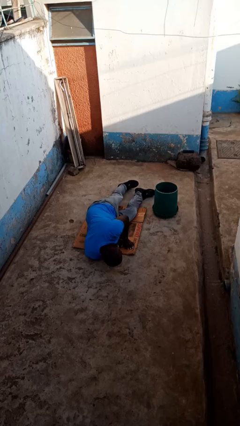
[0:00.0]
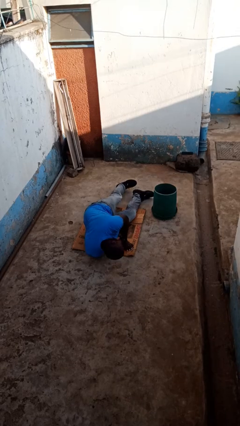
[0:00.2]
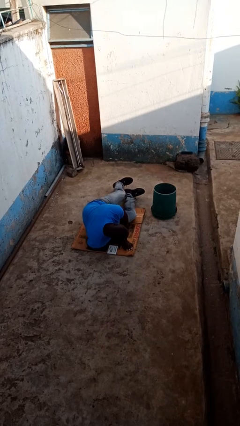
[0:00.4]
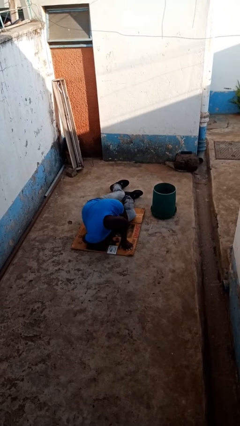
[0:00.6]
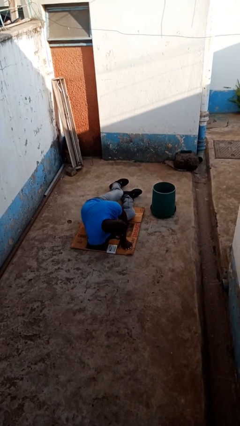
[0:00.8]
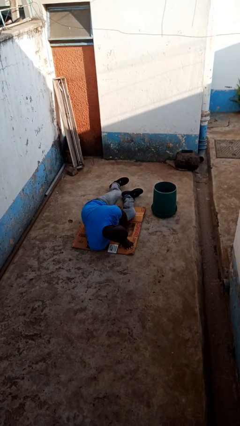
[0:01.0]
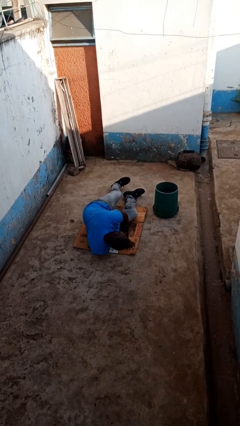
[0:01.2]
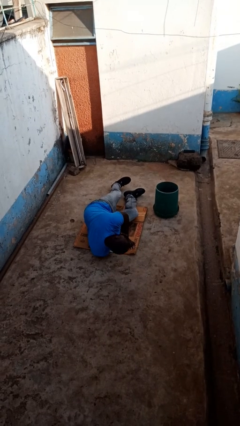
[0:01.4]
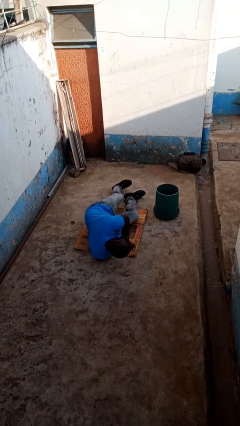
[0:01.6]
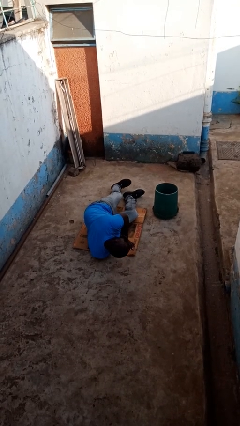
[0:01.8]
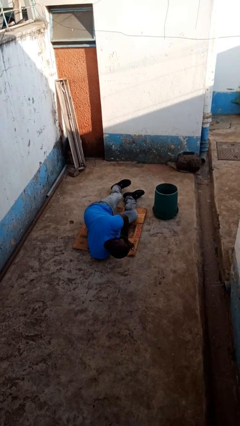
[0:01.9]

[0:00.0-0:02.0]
person lies down on floor

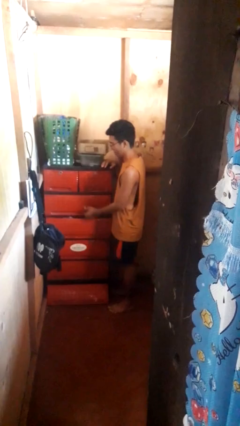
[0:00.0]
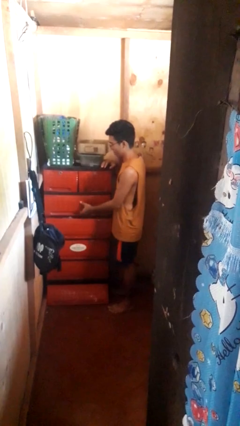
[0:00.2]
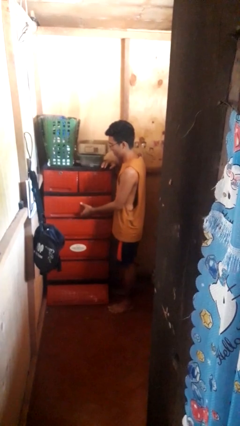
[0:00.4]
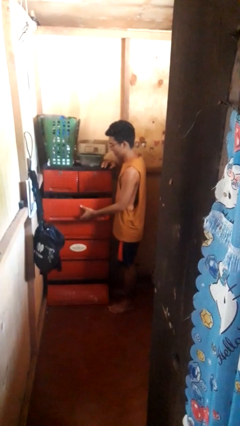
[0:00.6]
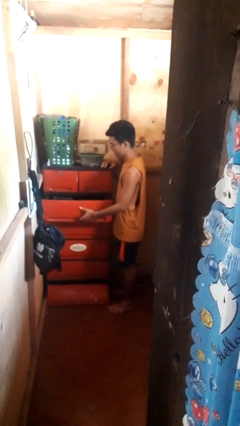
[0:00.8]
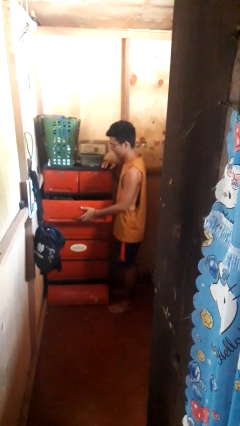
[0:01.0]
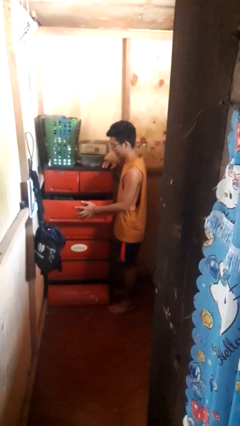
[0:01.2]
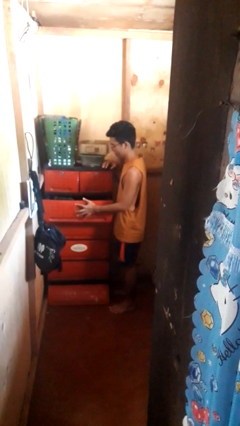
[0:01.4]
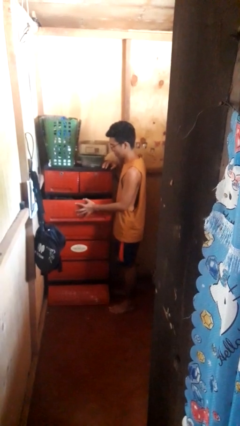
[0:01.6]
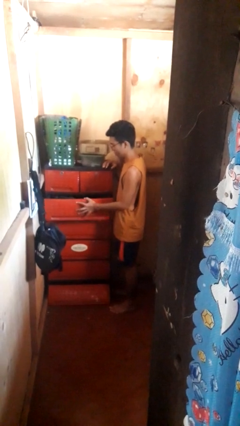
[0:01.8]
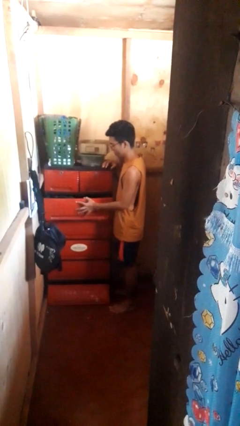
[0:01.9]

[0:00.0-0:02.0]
person opens dresser drawer

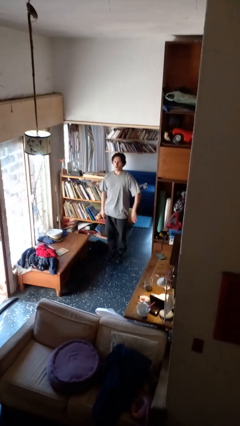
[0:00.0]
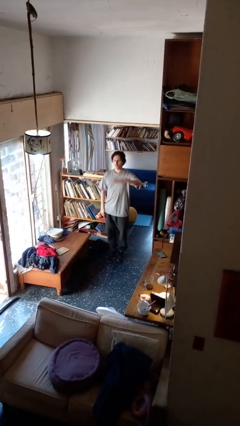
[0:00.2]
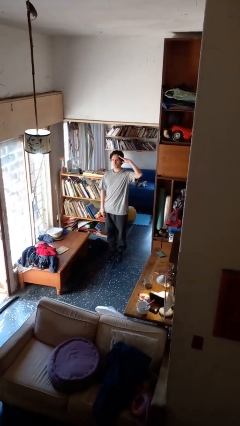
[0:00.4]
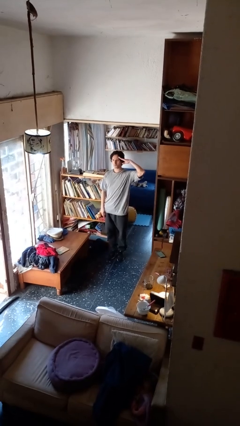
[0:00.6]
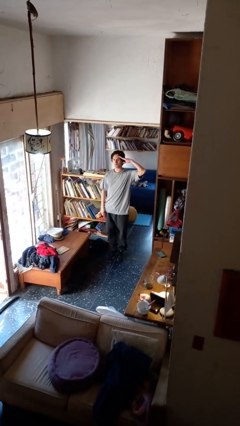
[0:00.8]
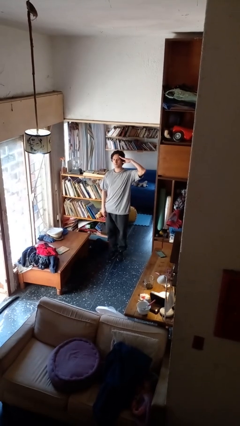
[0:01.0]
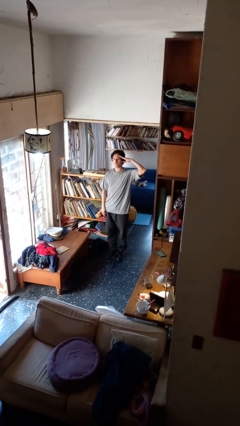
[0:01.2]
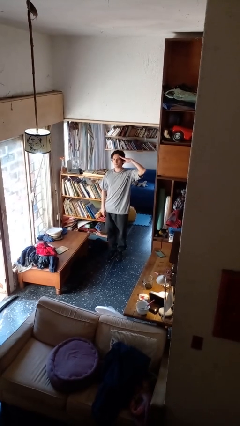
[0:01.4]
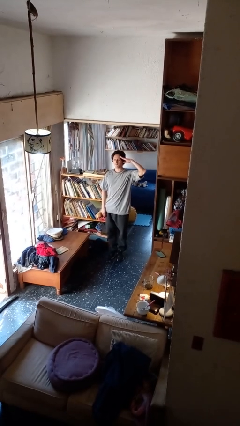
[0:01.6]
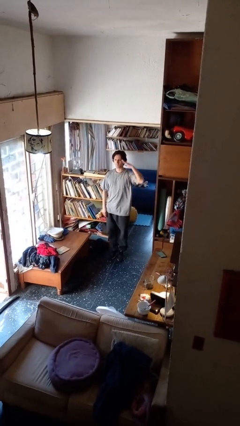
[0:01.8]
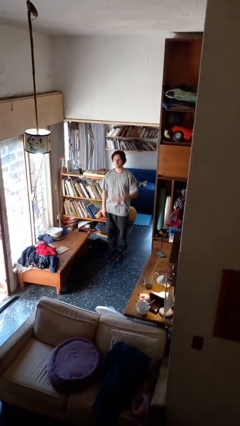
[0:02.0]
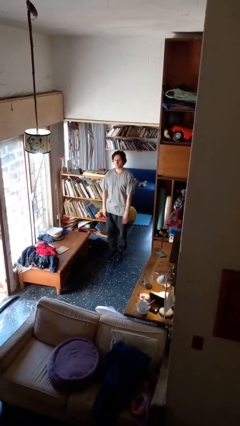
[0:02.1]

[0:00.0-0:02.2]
person salutes

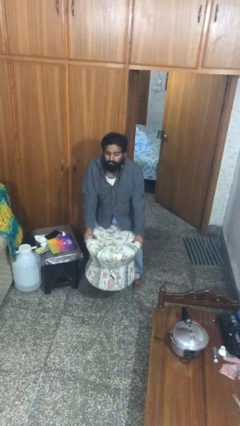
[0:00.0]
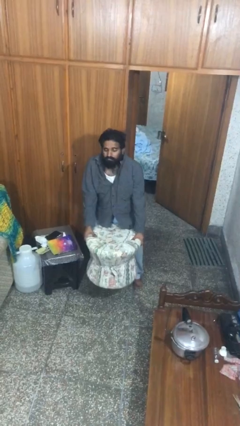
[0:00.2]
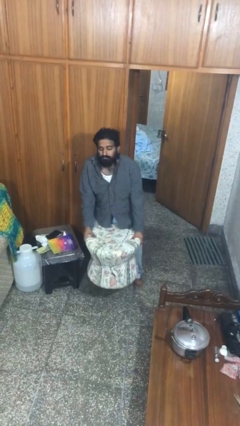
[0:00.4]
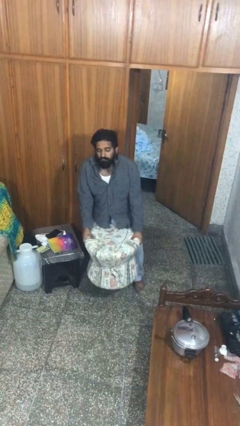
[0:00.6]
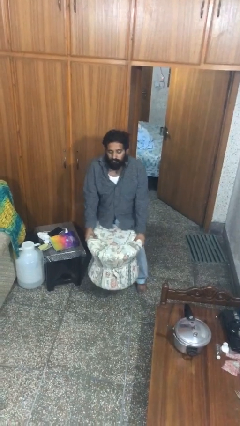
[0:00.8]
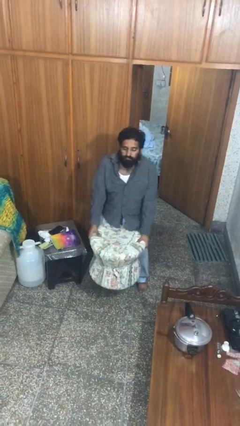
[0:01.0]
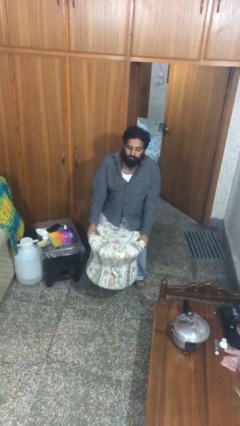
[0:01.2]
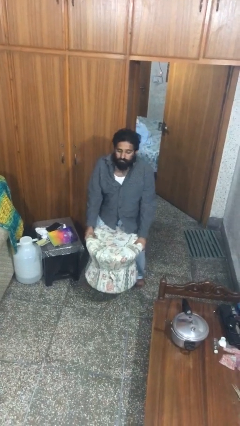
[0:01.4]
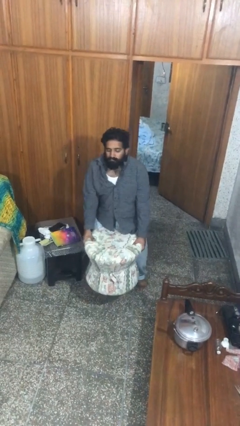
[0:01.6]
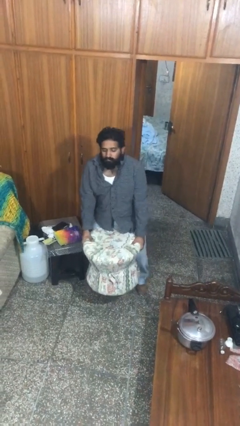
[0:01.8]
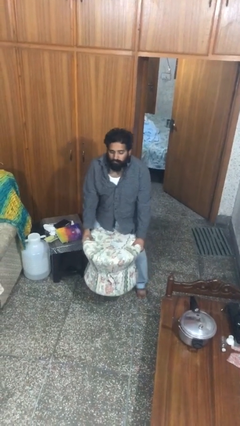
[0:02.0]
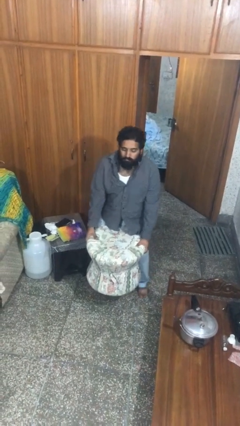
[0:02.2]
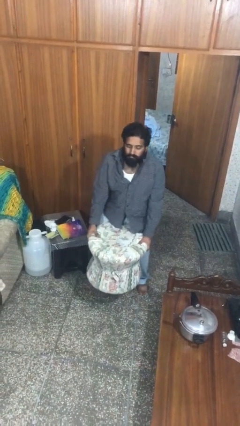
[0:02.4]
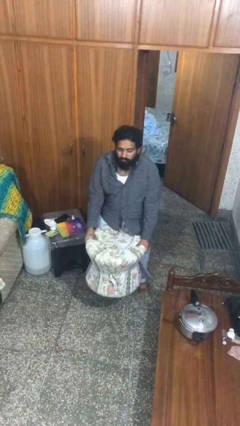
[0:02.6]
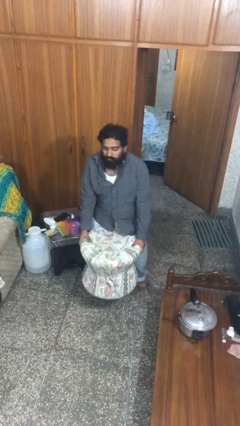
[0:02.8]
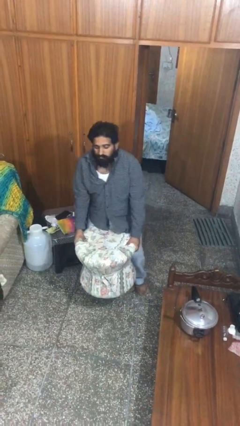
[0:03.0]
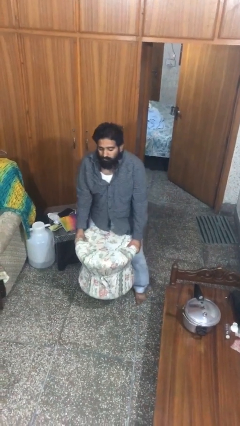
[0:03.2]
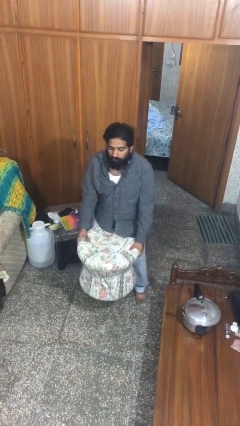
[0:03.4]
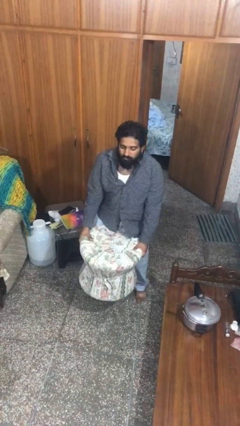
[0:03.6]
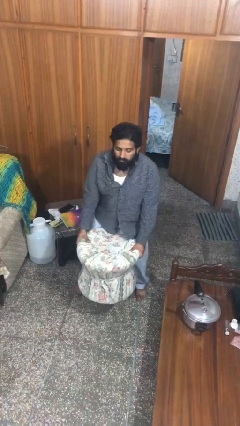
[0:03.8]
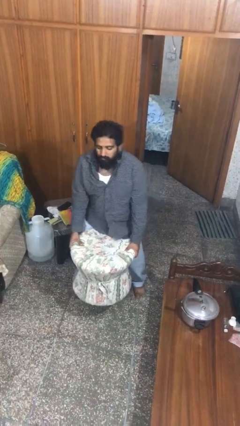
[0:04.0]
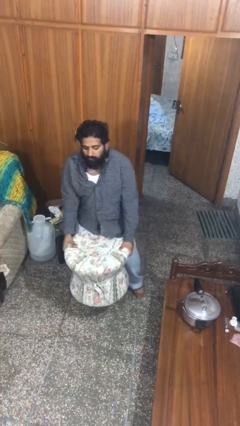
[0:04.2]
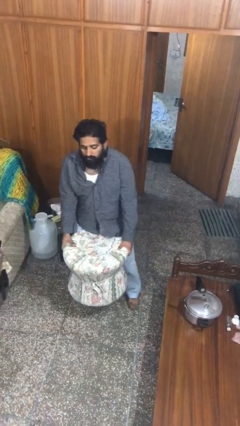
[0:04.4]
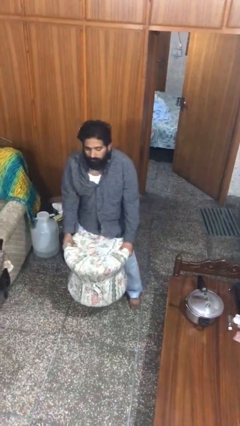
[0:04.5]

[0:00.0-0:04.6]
person carries heavy object

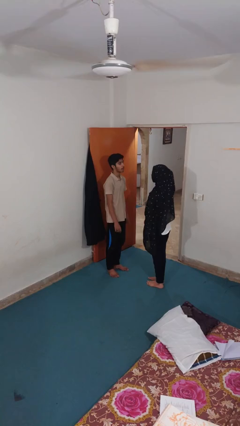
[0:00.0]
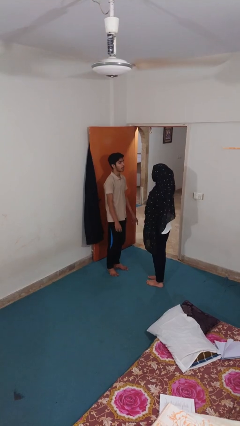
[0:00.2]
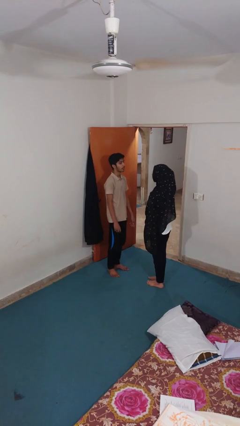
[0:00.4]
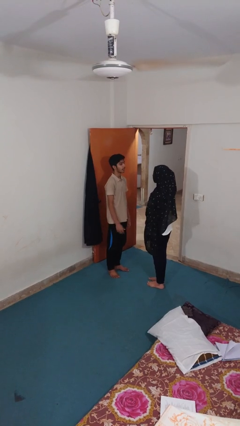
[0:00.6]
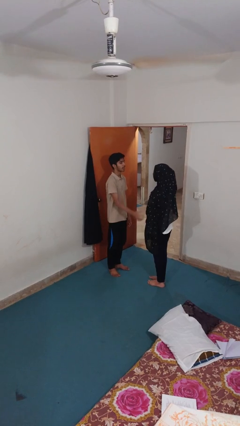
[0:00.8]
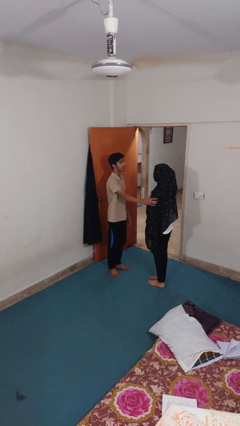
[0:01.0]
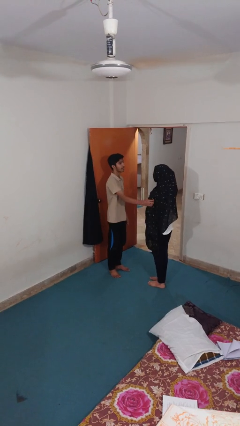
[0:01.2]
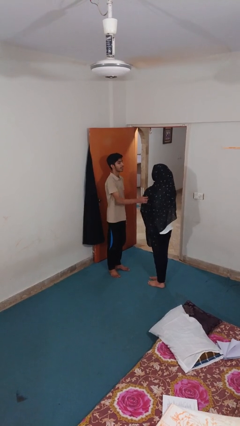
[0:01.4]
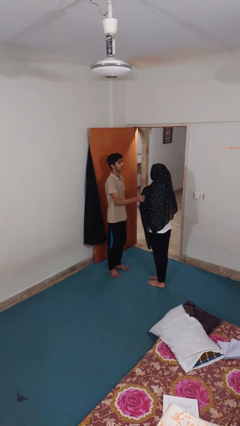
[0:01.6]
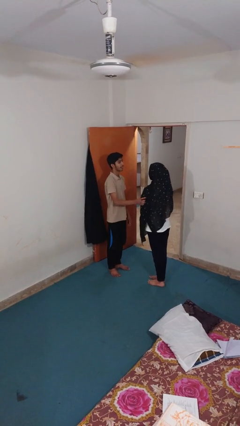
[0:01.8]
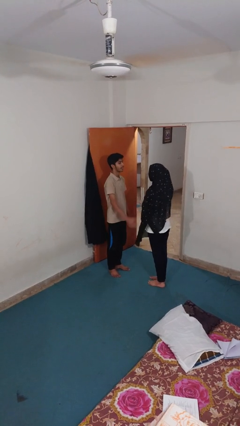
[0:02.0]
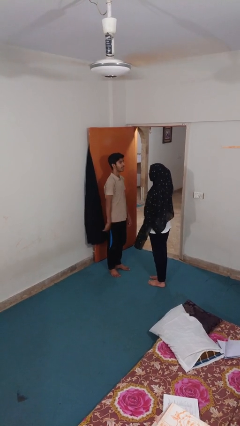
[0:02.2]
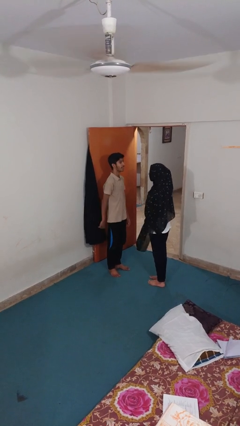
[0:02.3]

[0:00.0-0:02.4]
person grabs person by bicep

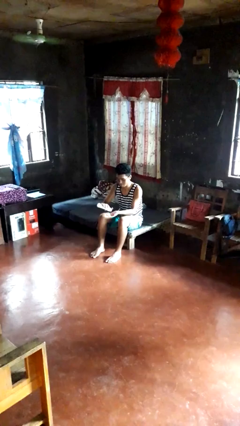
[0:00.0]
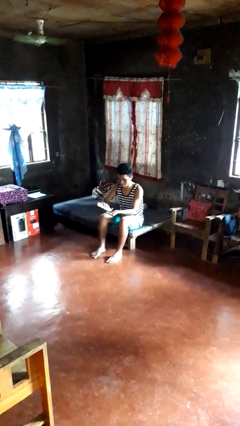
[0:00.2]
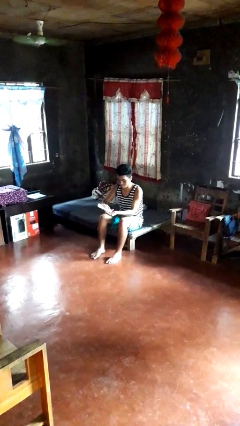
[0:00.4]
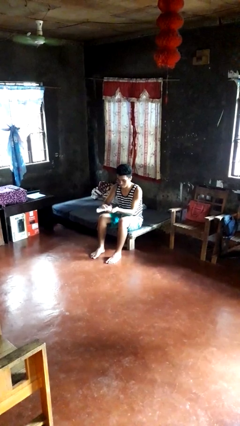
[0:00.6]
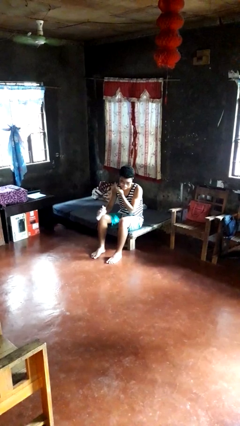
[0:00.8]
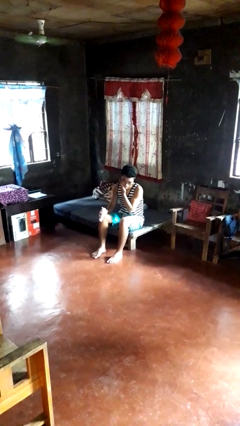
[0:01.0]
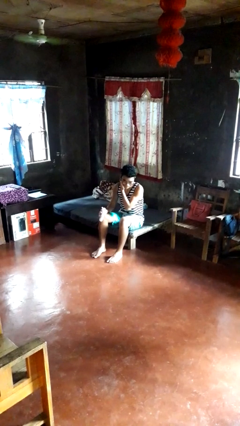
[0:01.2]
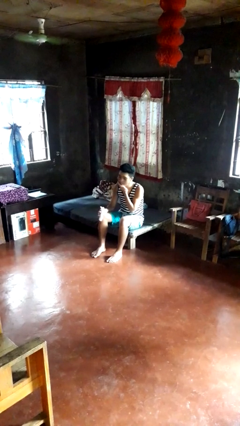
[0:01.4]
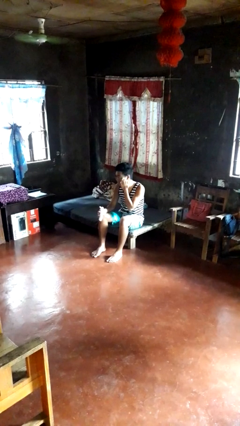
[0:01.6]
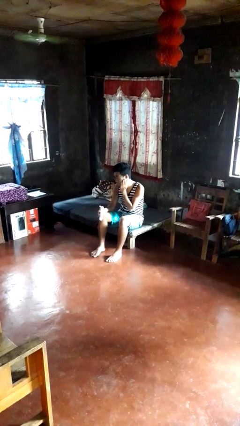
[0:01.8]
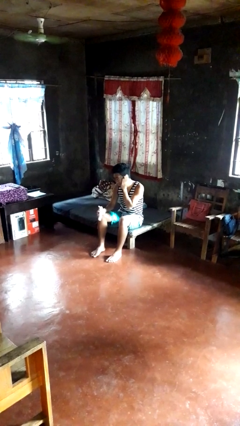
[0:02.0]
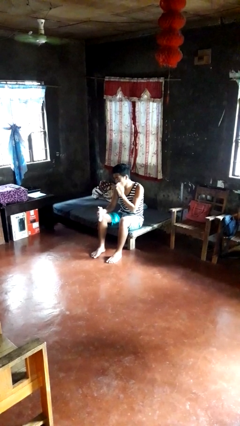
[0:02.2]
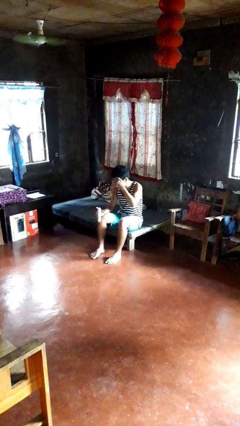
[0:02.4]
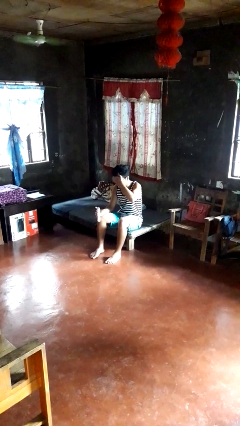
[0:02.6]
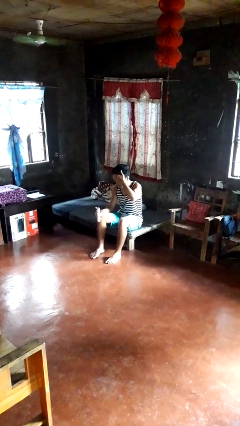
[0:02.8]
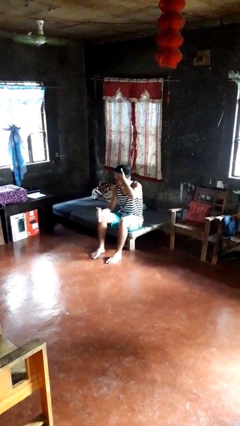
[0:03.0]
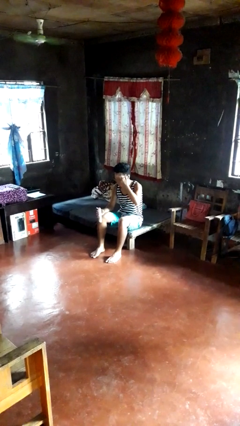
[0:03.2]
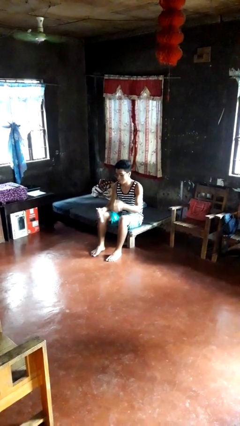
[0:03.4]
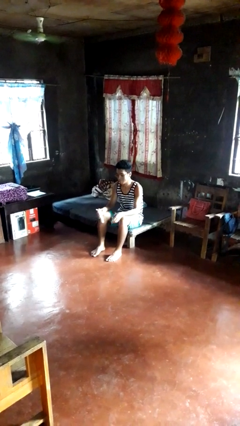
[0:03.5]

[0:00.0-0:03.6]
person applies sunscreen

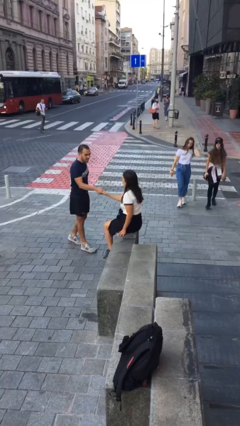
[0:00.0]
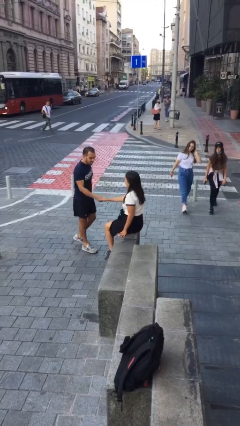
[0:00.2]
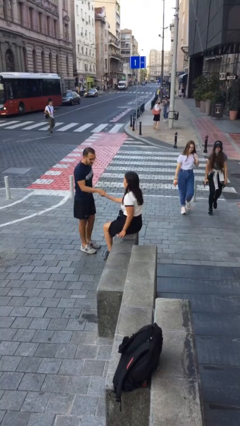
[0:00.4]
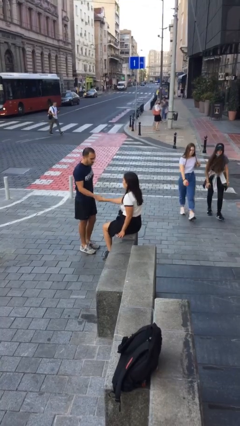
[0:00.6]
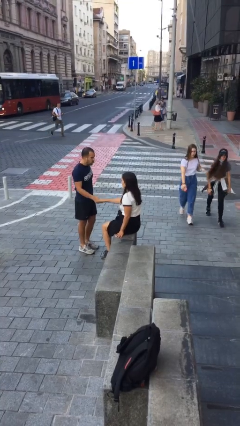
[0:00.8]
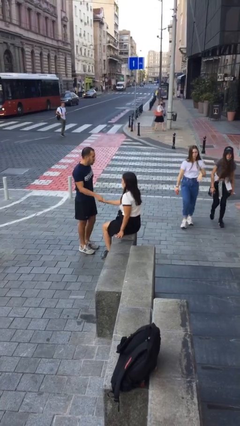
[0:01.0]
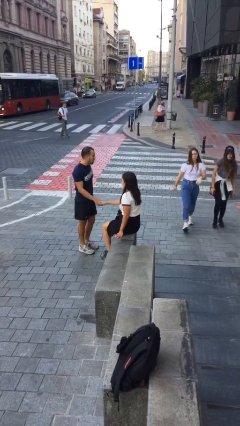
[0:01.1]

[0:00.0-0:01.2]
person shakes hand
